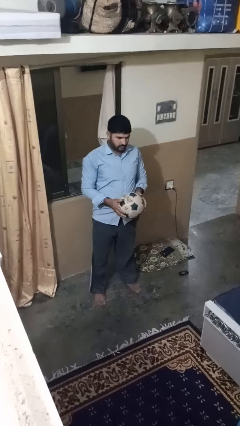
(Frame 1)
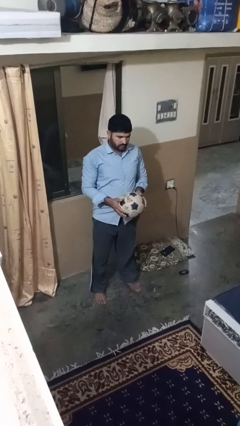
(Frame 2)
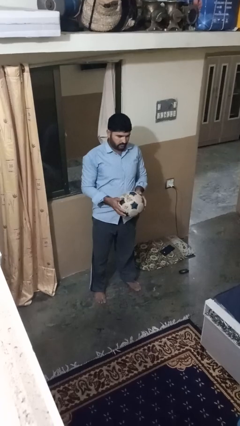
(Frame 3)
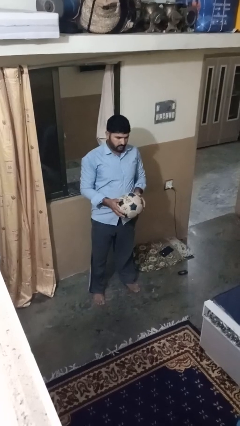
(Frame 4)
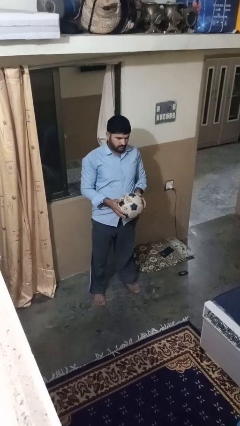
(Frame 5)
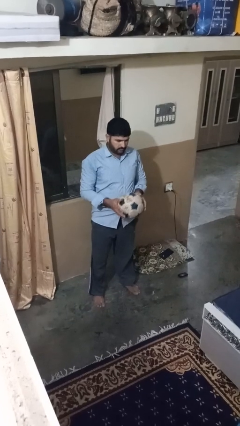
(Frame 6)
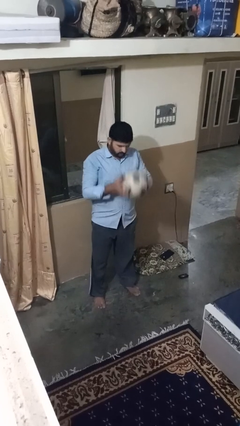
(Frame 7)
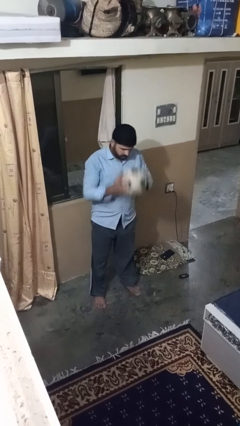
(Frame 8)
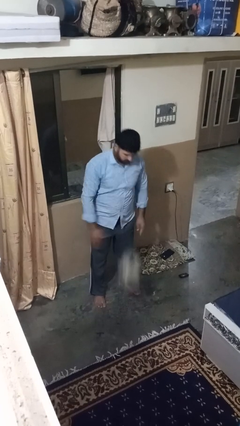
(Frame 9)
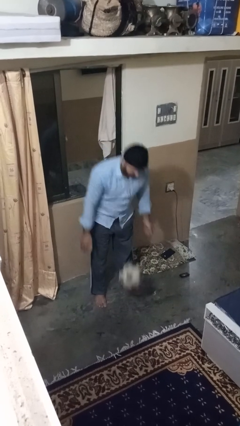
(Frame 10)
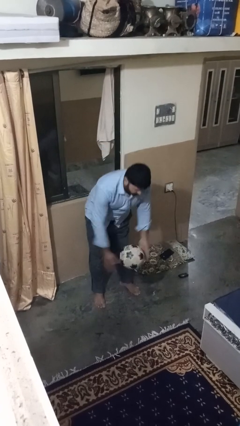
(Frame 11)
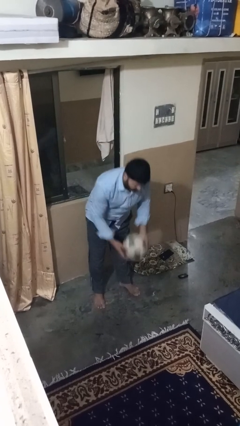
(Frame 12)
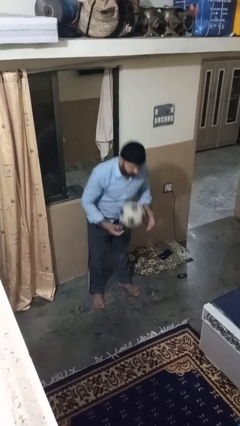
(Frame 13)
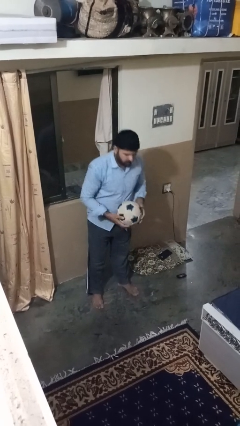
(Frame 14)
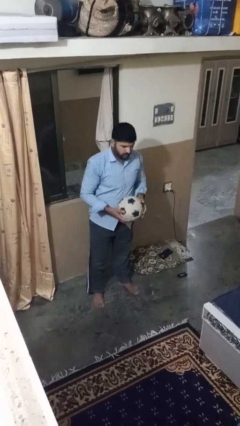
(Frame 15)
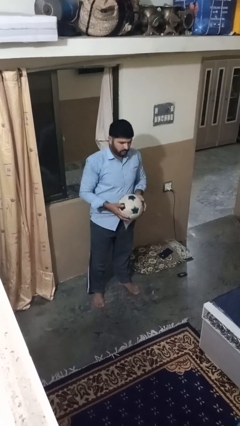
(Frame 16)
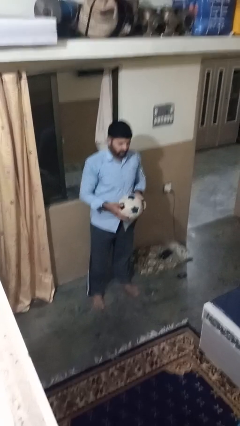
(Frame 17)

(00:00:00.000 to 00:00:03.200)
person bounces ball on floor

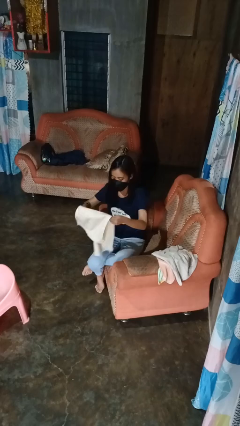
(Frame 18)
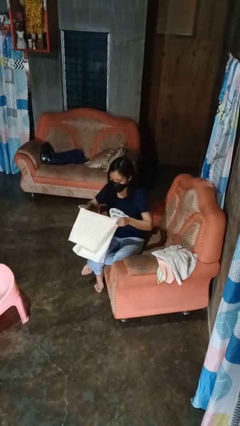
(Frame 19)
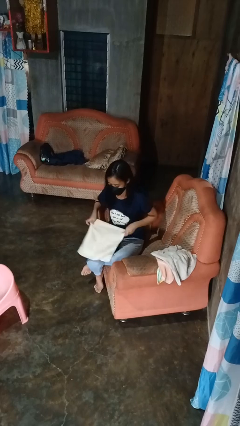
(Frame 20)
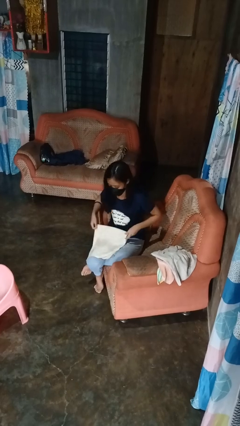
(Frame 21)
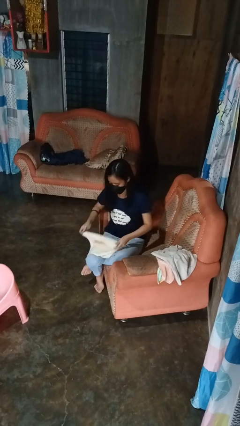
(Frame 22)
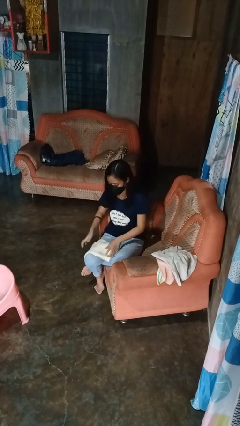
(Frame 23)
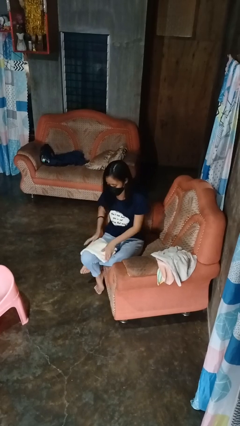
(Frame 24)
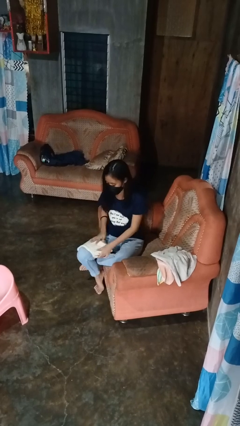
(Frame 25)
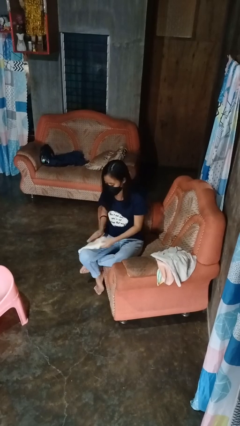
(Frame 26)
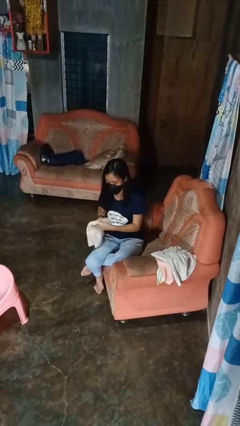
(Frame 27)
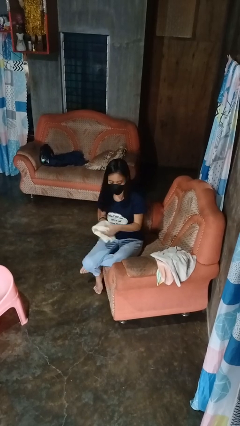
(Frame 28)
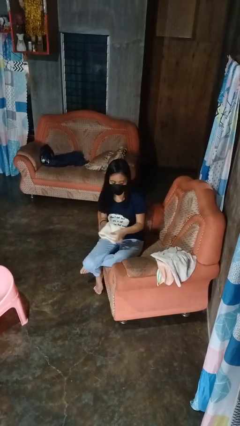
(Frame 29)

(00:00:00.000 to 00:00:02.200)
person folds towel

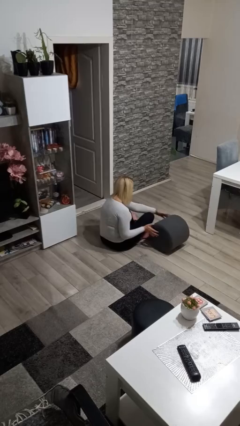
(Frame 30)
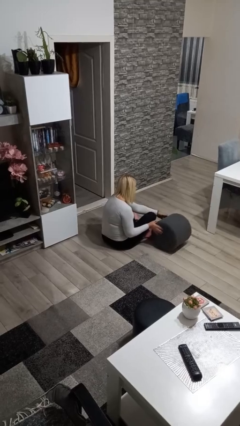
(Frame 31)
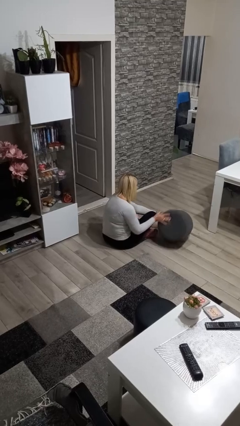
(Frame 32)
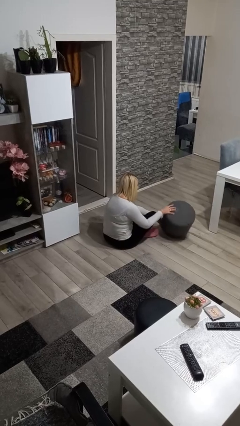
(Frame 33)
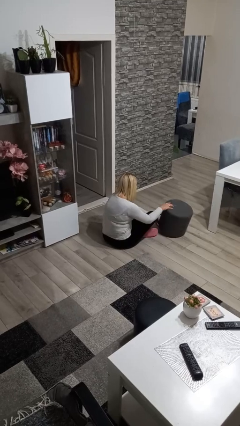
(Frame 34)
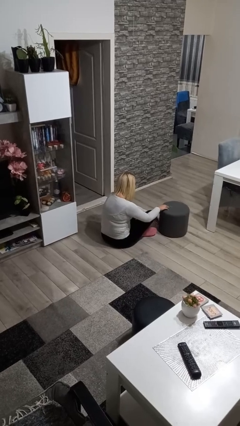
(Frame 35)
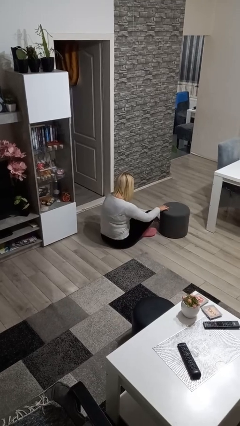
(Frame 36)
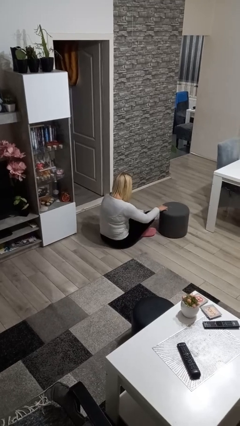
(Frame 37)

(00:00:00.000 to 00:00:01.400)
person sets upright furniture

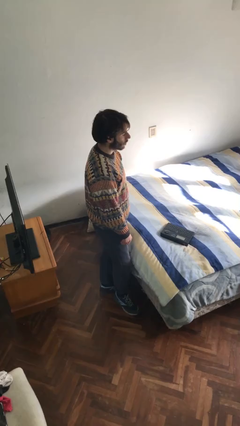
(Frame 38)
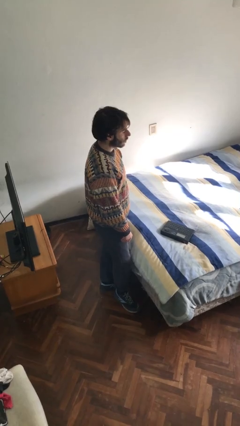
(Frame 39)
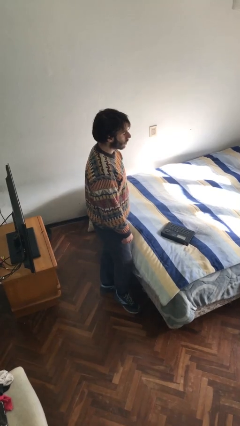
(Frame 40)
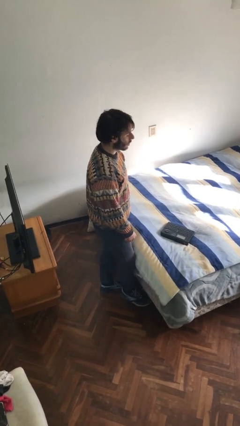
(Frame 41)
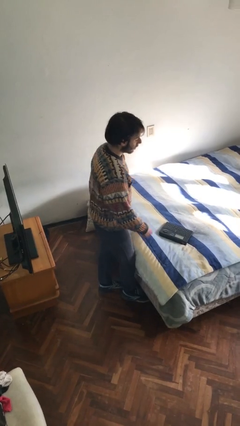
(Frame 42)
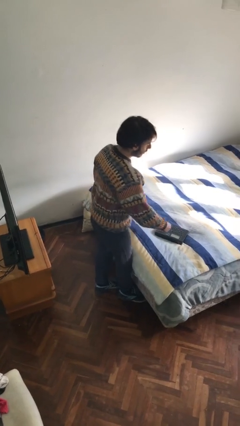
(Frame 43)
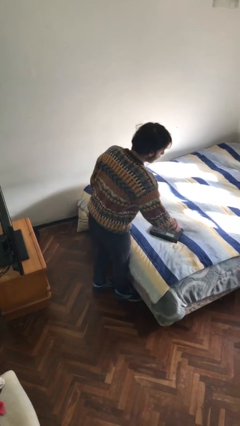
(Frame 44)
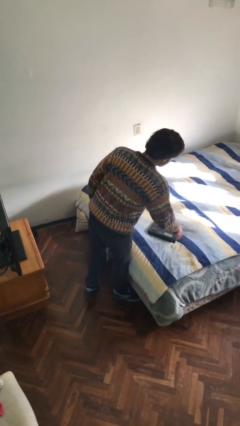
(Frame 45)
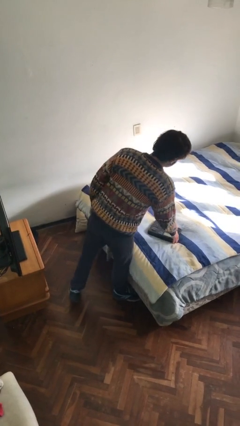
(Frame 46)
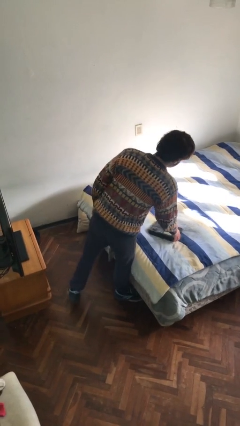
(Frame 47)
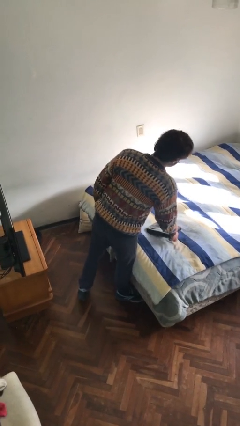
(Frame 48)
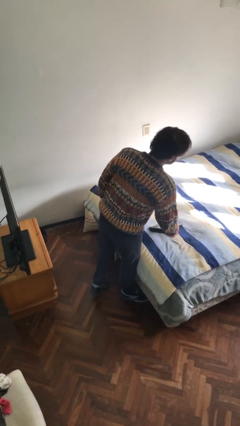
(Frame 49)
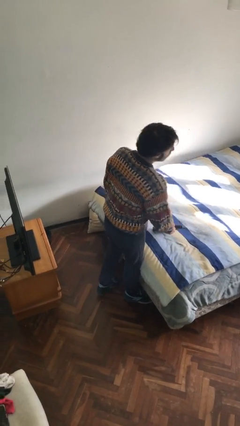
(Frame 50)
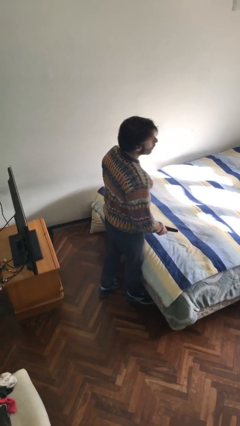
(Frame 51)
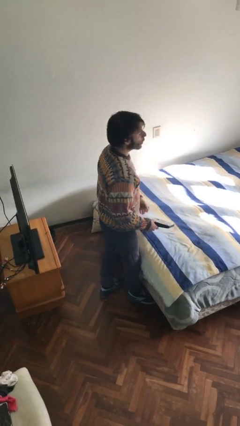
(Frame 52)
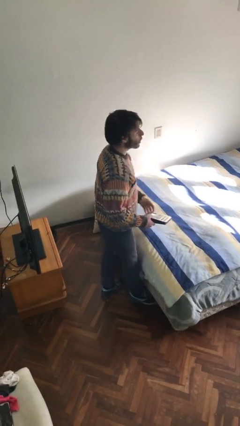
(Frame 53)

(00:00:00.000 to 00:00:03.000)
person picks up object from bed

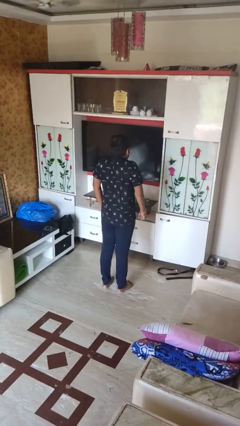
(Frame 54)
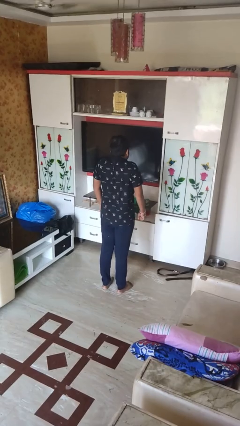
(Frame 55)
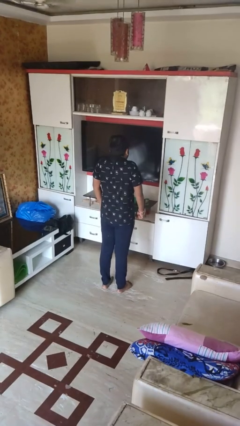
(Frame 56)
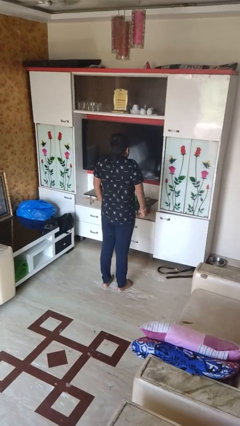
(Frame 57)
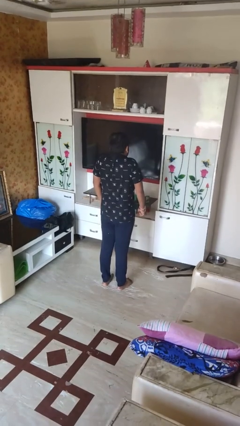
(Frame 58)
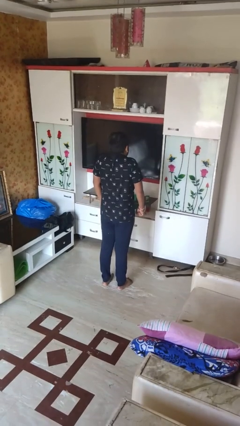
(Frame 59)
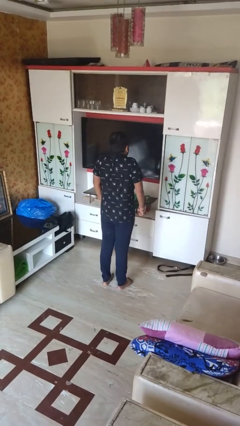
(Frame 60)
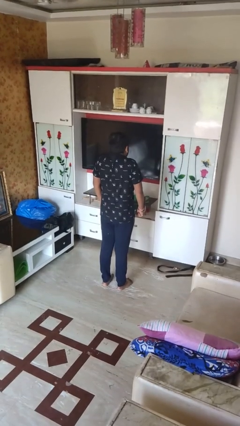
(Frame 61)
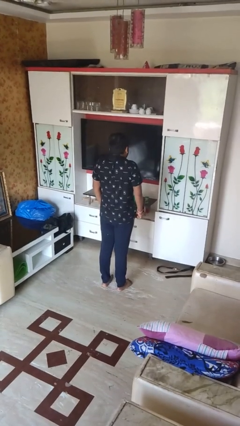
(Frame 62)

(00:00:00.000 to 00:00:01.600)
person shrugs

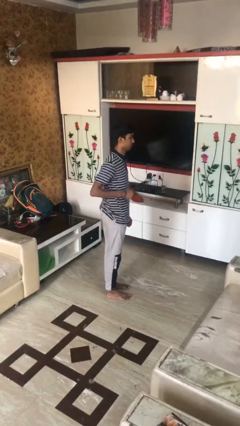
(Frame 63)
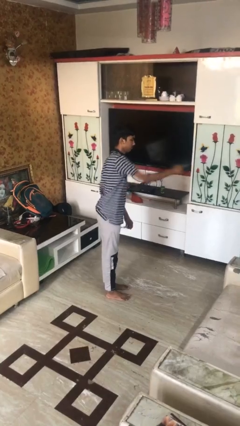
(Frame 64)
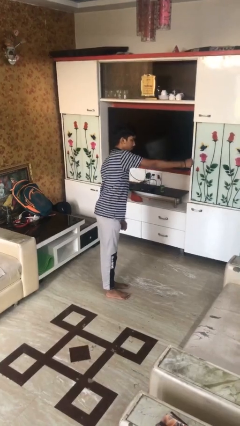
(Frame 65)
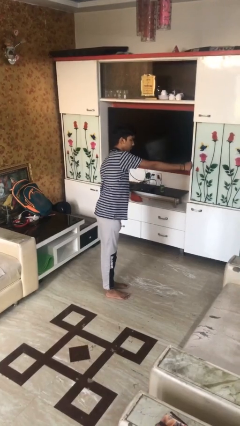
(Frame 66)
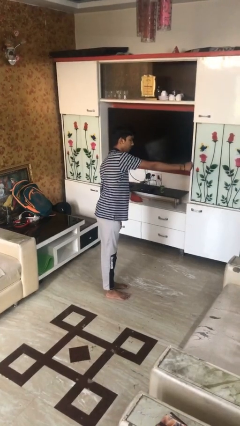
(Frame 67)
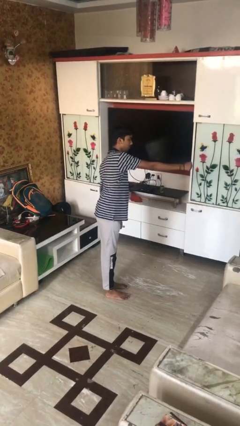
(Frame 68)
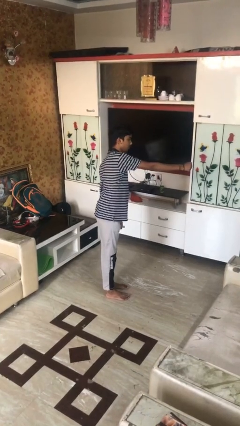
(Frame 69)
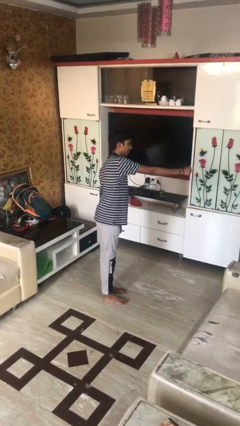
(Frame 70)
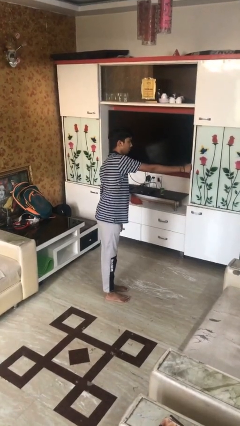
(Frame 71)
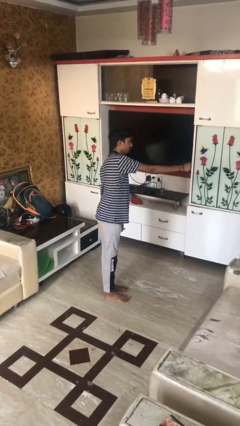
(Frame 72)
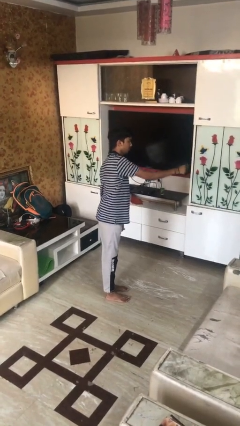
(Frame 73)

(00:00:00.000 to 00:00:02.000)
person punches

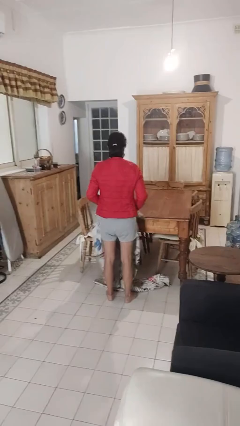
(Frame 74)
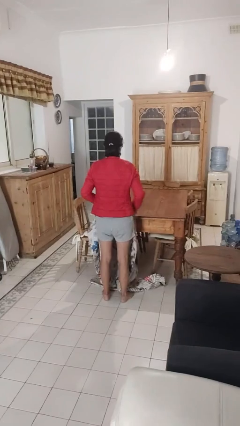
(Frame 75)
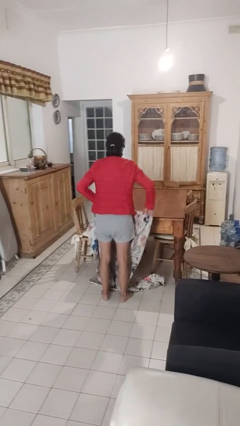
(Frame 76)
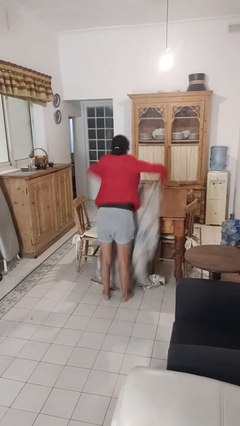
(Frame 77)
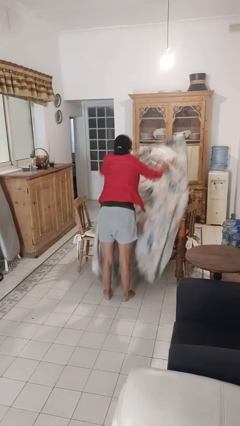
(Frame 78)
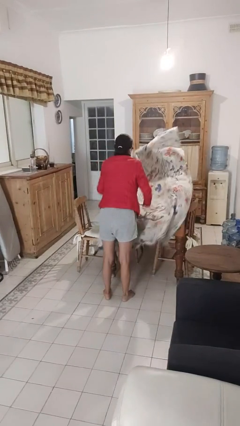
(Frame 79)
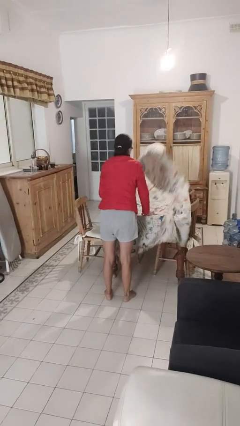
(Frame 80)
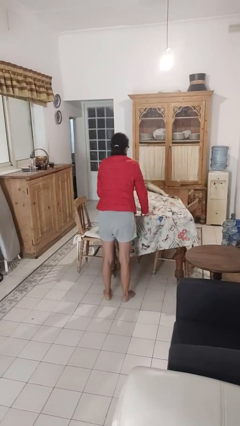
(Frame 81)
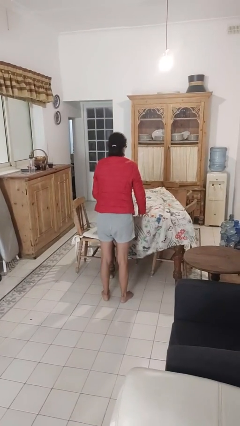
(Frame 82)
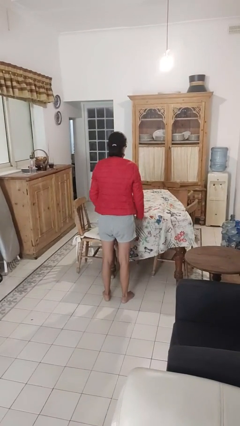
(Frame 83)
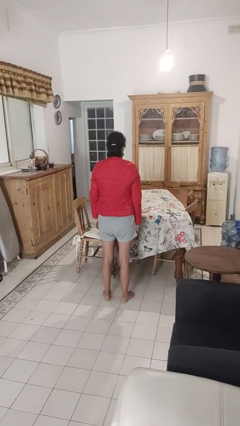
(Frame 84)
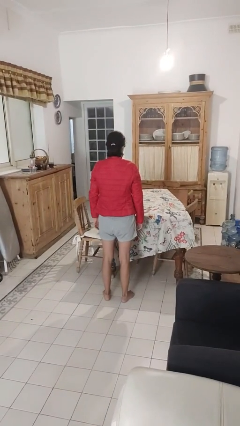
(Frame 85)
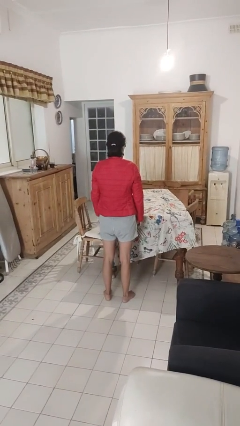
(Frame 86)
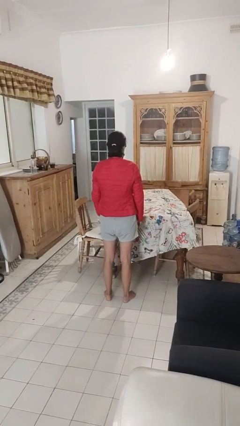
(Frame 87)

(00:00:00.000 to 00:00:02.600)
person spreads tablecloth

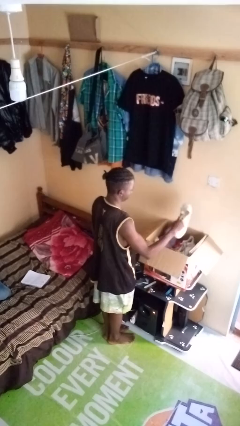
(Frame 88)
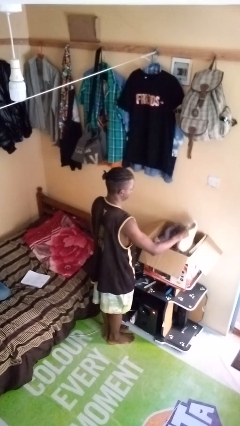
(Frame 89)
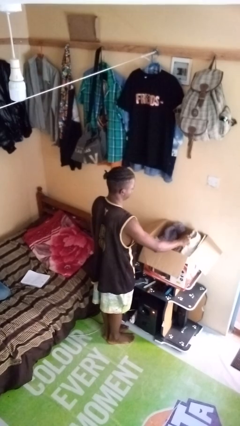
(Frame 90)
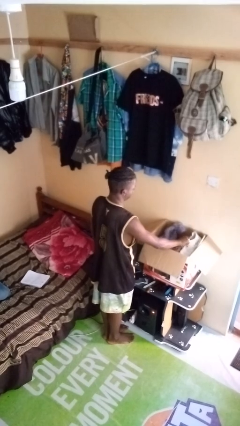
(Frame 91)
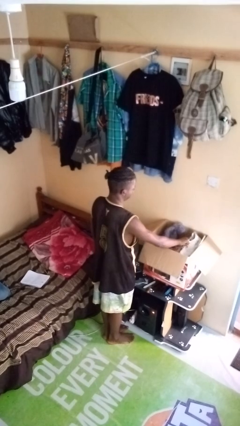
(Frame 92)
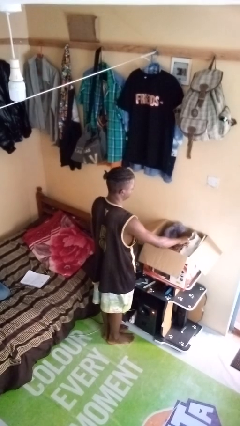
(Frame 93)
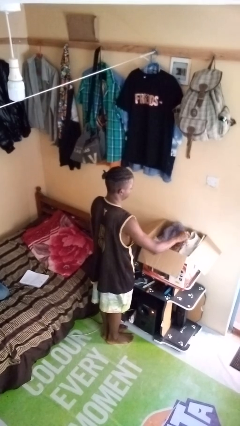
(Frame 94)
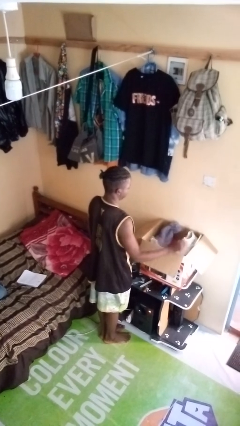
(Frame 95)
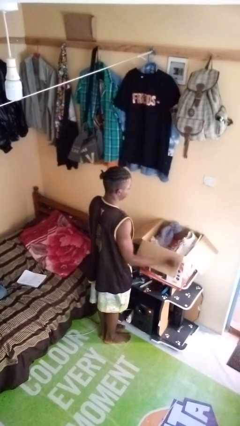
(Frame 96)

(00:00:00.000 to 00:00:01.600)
person puts object into box
